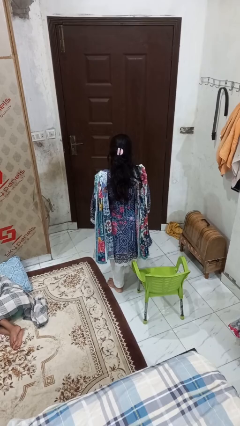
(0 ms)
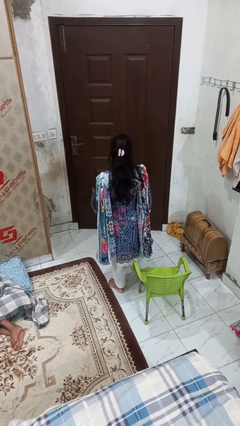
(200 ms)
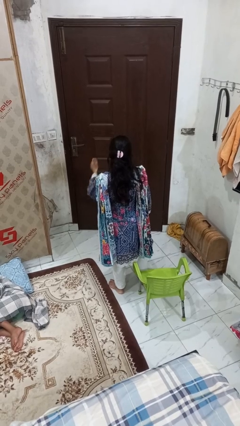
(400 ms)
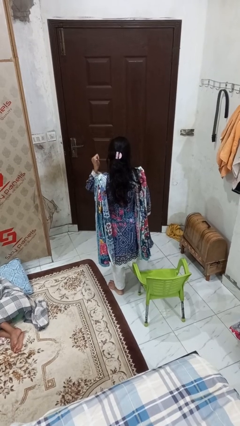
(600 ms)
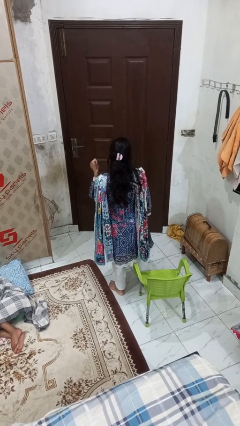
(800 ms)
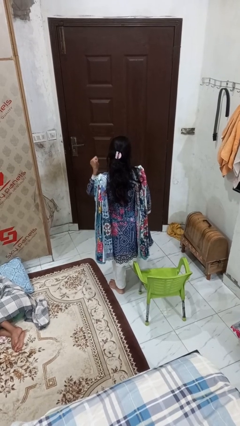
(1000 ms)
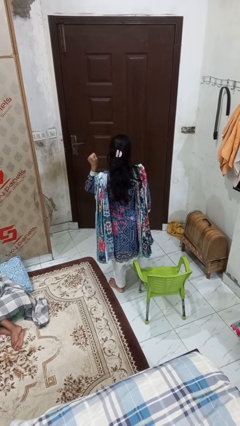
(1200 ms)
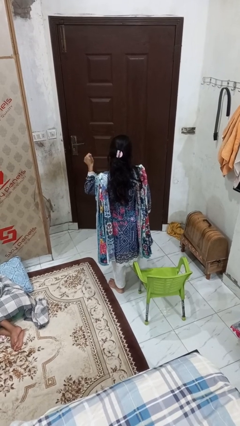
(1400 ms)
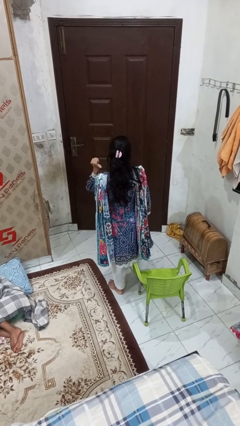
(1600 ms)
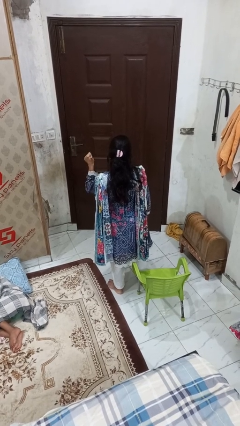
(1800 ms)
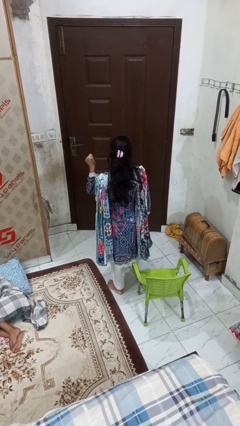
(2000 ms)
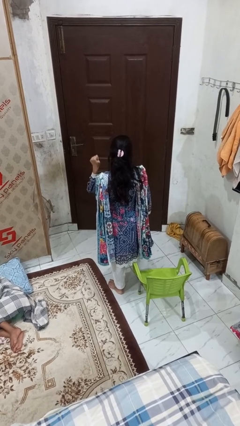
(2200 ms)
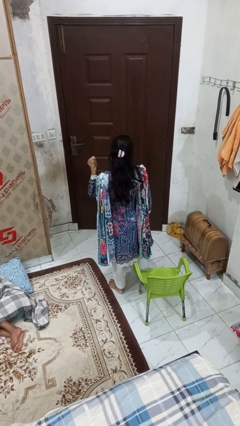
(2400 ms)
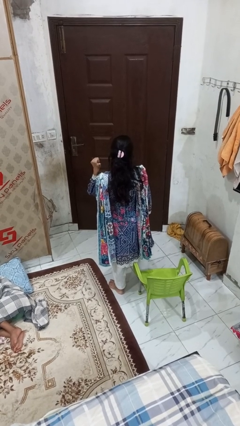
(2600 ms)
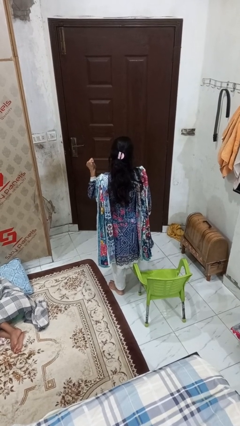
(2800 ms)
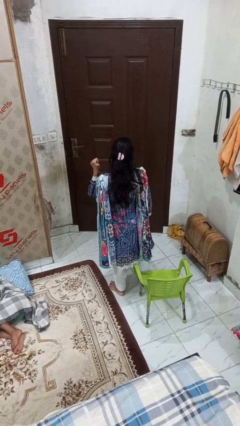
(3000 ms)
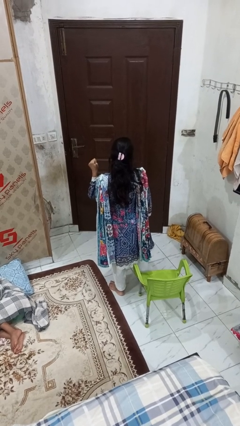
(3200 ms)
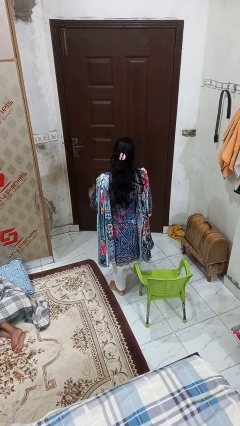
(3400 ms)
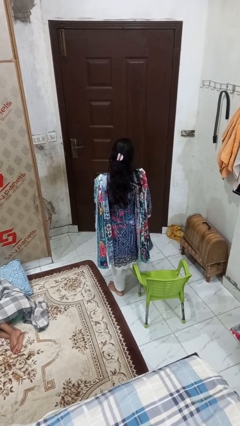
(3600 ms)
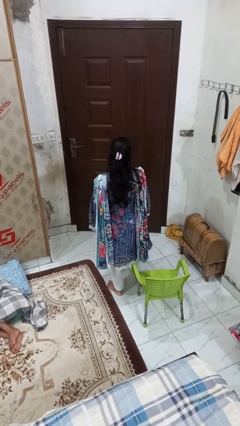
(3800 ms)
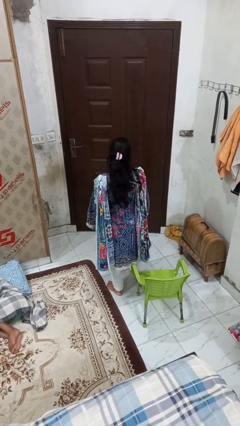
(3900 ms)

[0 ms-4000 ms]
person gestures behind me

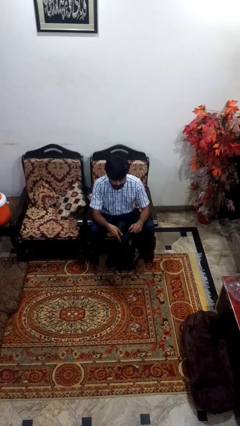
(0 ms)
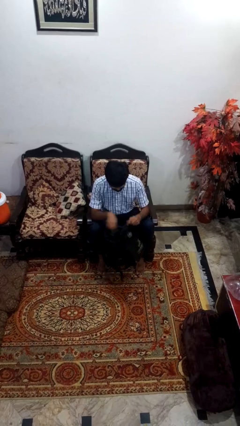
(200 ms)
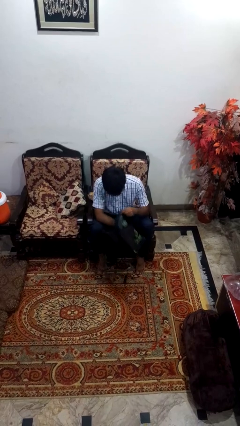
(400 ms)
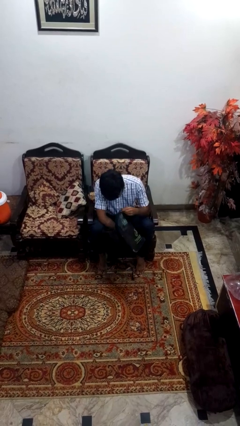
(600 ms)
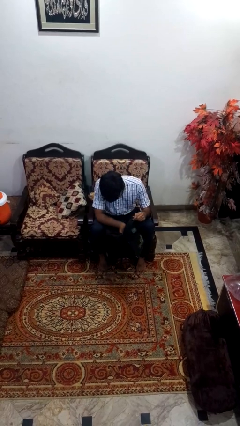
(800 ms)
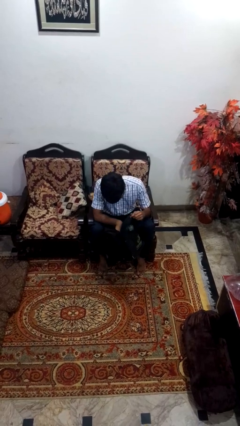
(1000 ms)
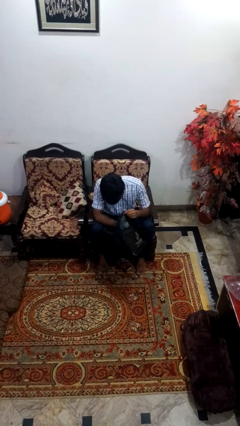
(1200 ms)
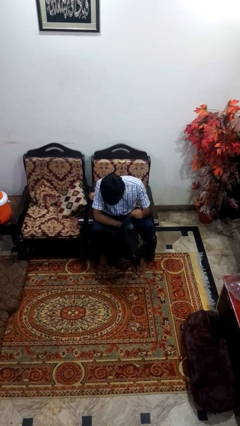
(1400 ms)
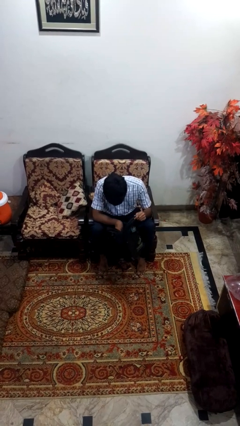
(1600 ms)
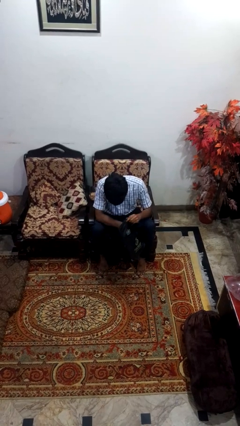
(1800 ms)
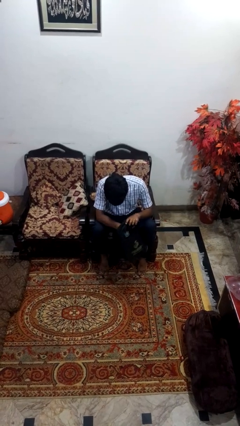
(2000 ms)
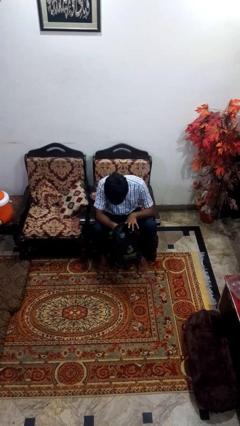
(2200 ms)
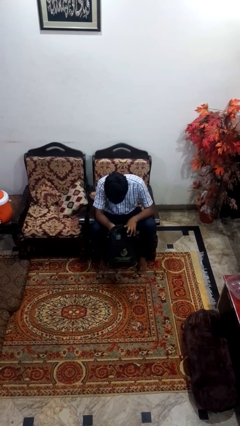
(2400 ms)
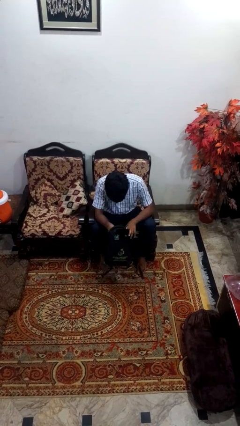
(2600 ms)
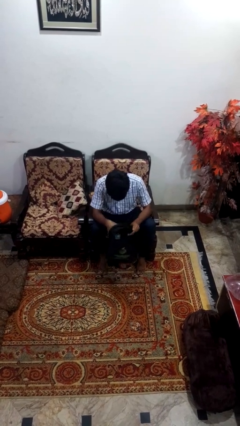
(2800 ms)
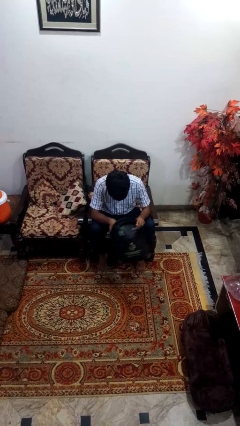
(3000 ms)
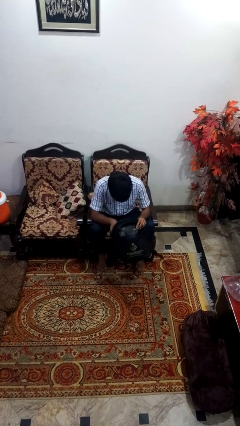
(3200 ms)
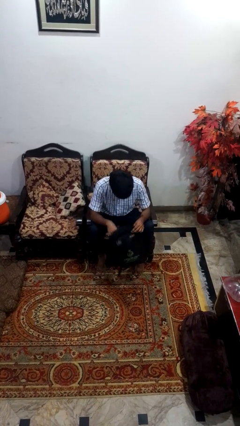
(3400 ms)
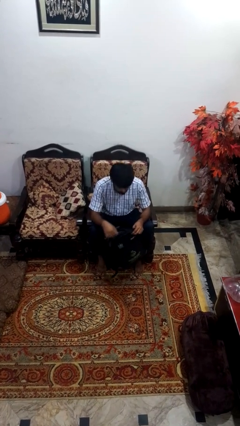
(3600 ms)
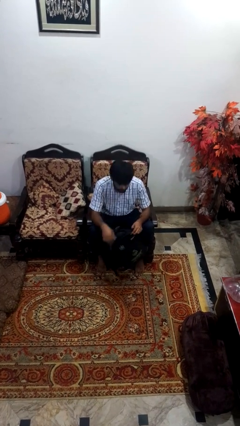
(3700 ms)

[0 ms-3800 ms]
person searches in bag

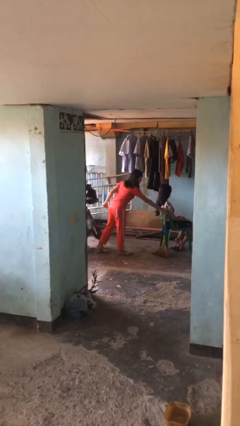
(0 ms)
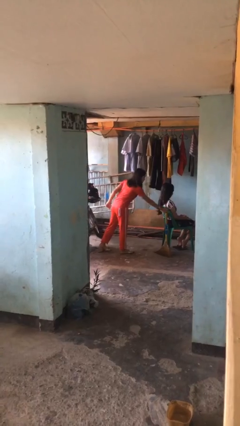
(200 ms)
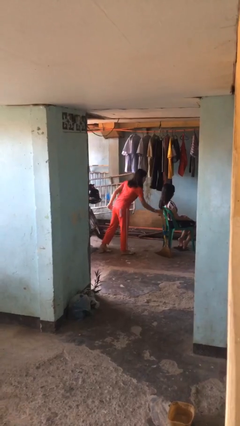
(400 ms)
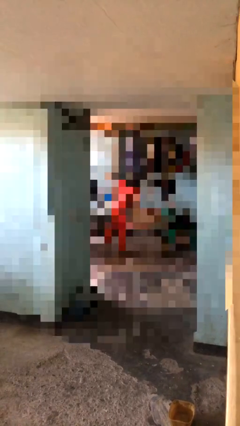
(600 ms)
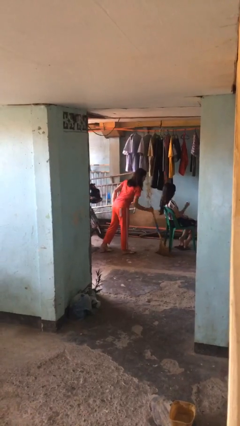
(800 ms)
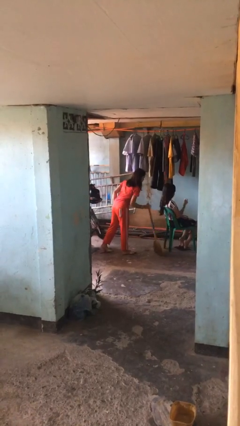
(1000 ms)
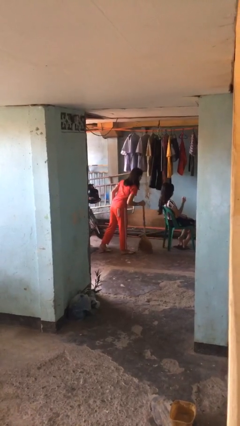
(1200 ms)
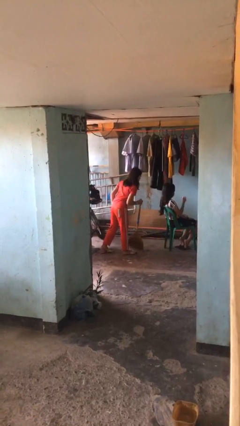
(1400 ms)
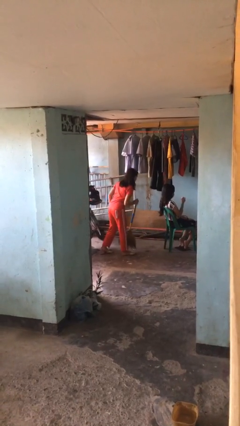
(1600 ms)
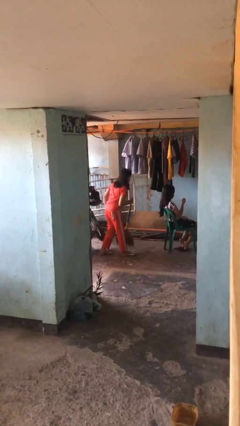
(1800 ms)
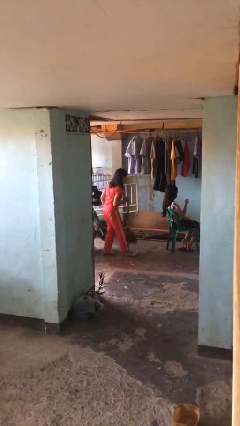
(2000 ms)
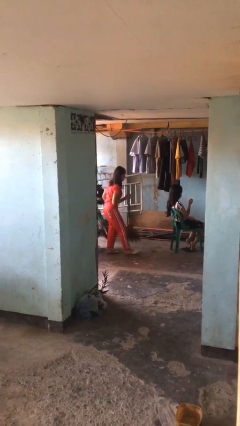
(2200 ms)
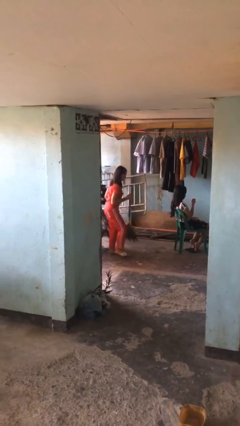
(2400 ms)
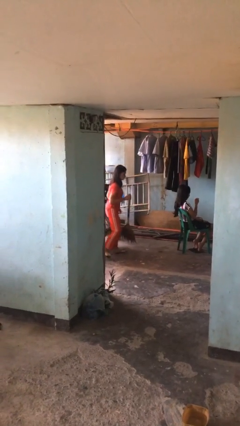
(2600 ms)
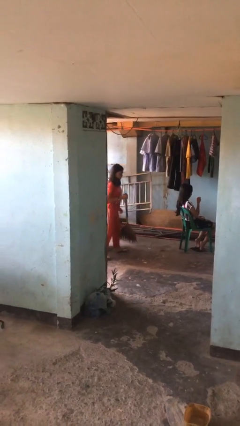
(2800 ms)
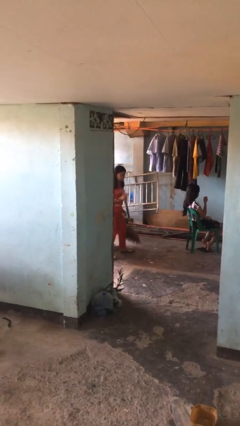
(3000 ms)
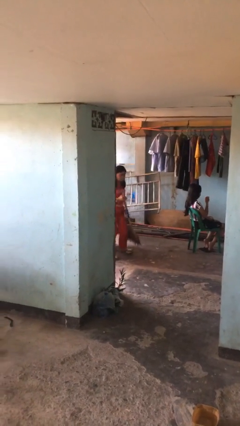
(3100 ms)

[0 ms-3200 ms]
person steals object from person

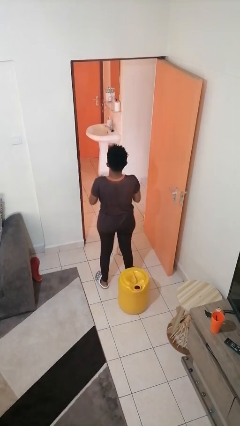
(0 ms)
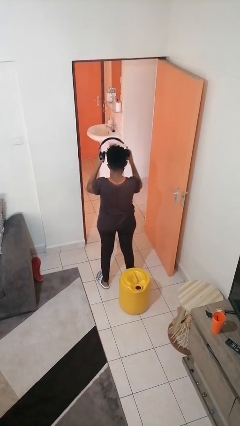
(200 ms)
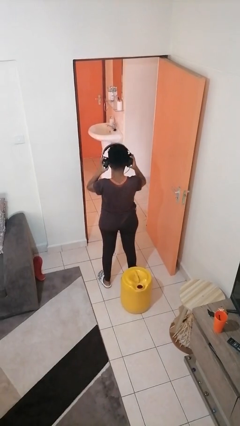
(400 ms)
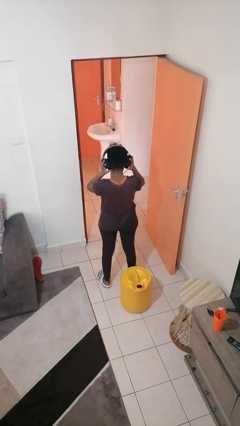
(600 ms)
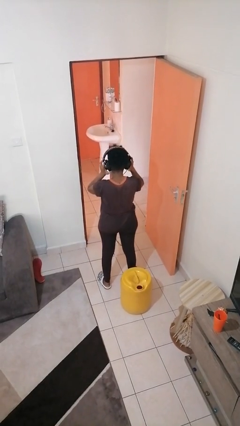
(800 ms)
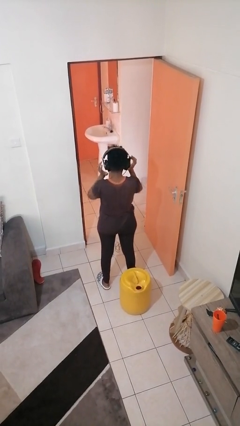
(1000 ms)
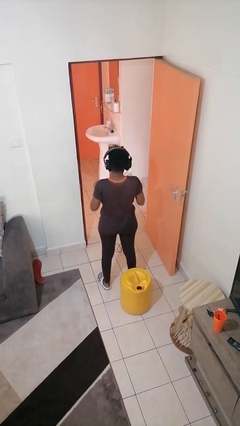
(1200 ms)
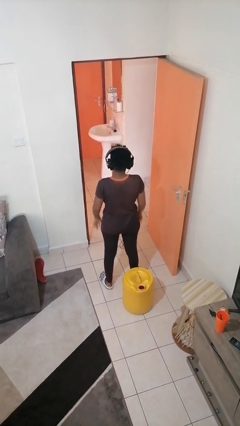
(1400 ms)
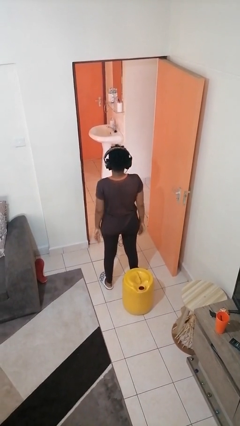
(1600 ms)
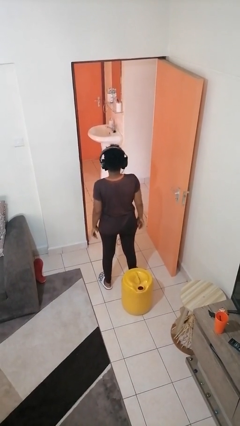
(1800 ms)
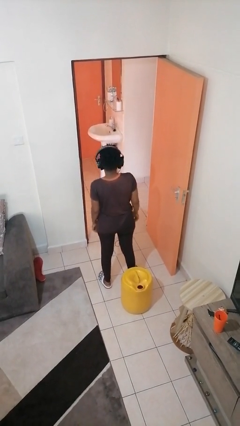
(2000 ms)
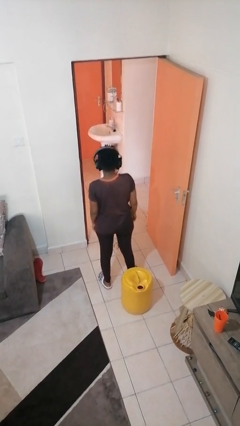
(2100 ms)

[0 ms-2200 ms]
person puts on headphones

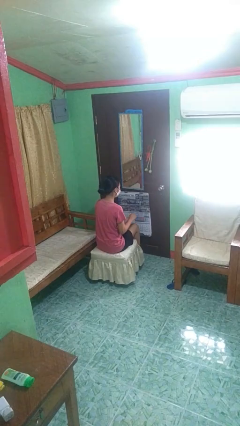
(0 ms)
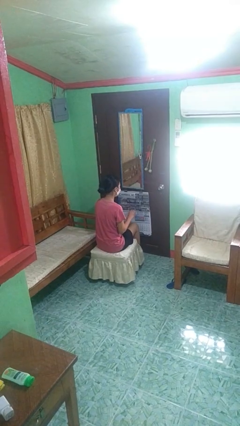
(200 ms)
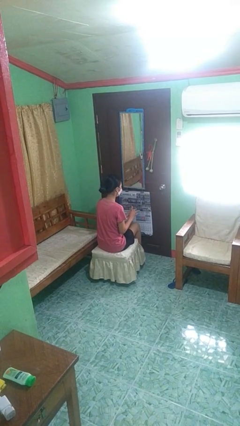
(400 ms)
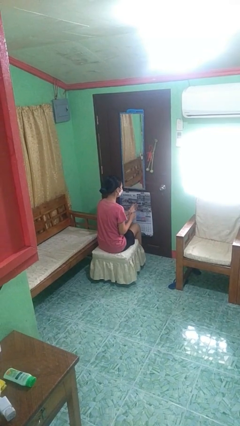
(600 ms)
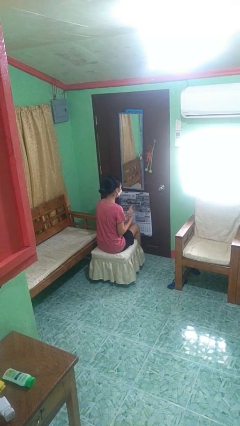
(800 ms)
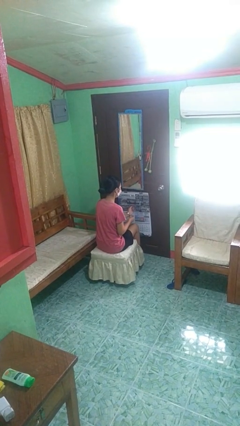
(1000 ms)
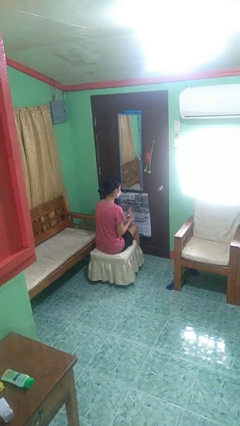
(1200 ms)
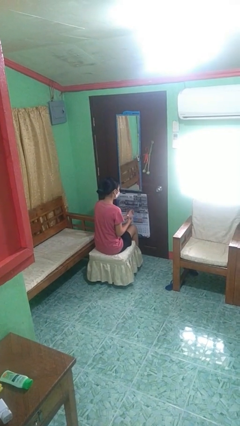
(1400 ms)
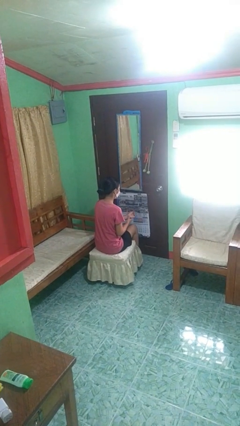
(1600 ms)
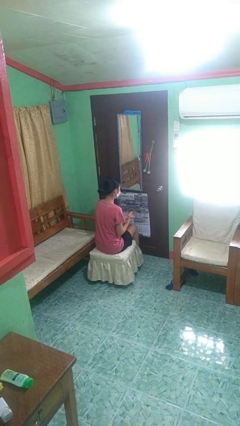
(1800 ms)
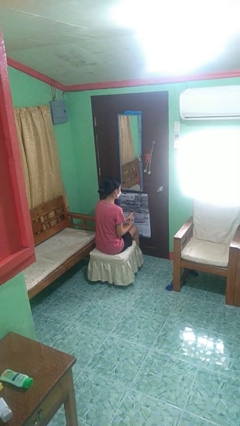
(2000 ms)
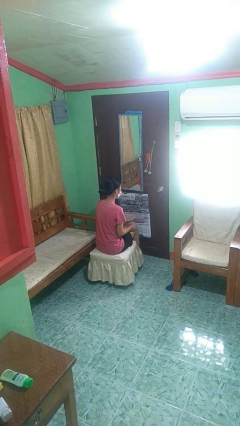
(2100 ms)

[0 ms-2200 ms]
person puts on wristwatch

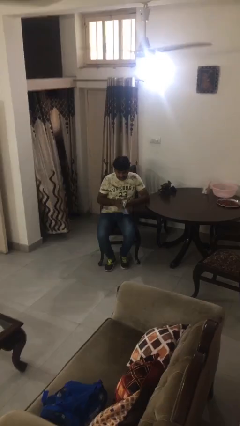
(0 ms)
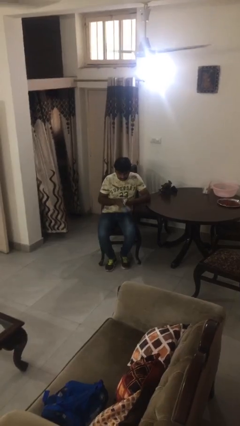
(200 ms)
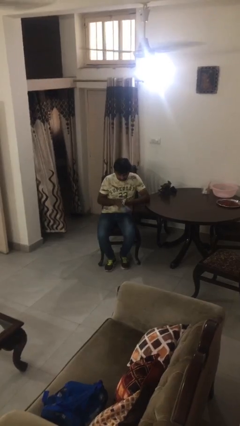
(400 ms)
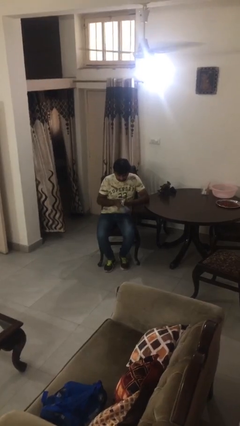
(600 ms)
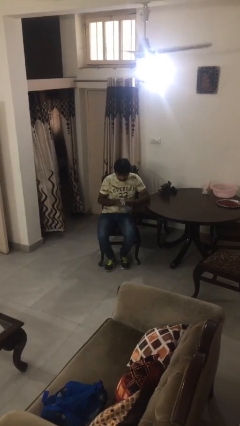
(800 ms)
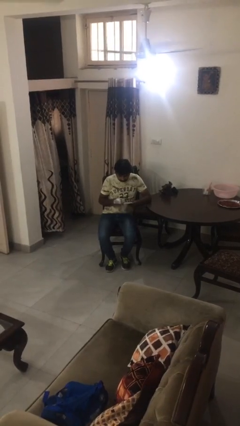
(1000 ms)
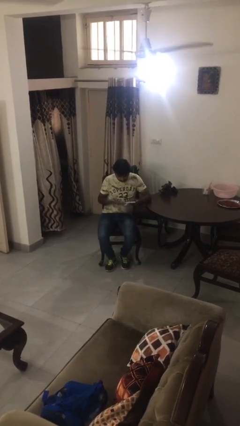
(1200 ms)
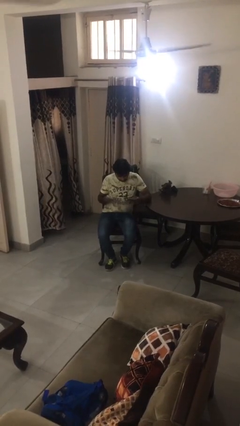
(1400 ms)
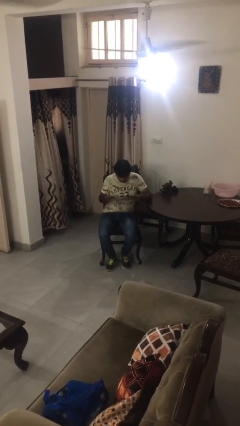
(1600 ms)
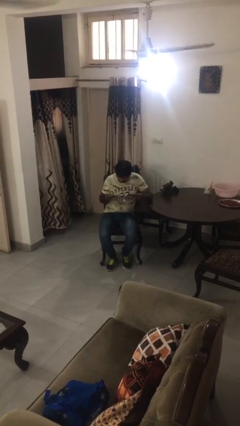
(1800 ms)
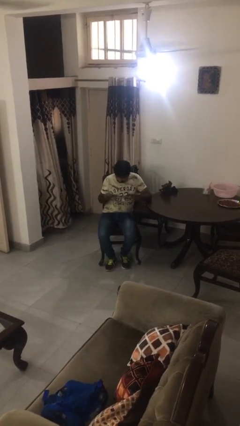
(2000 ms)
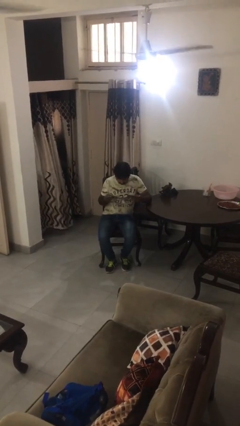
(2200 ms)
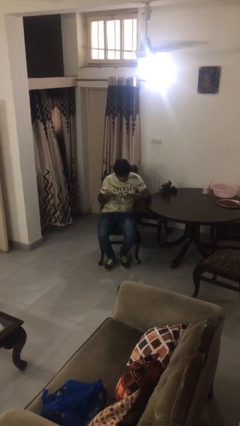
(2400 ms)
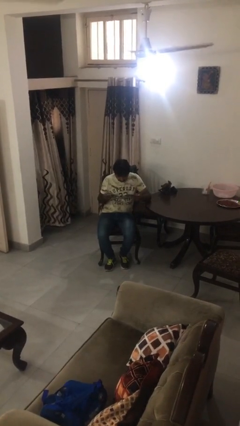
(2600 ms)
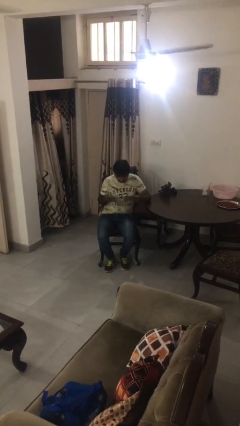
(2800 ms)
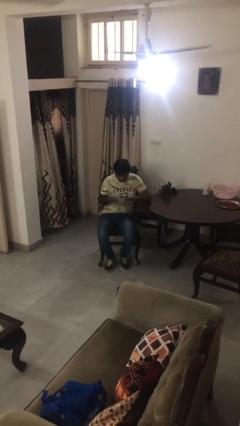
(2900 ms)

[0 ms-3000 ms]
person reads magazine
